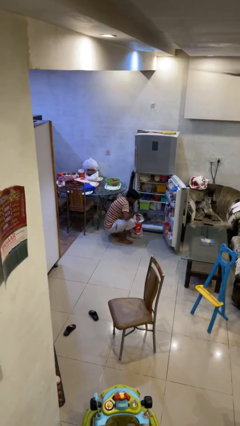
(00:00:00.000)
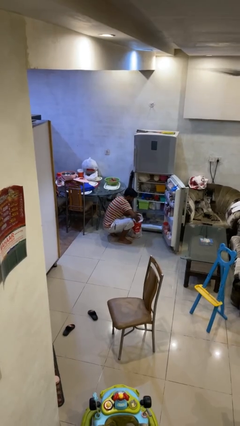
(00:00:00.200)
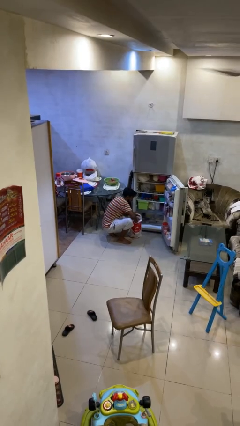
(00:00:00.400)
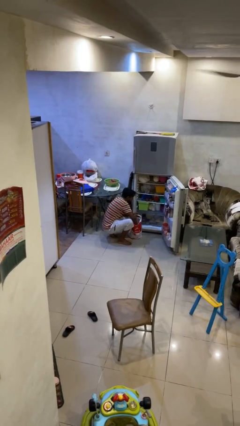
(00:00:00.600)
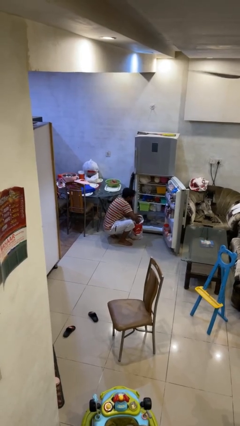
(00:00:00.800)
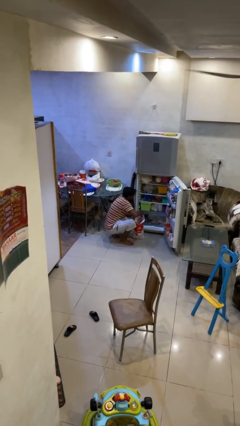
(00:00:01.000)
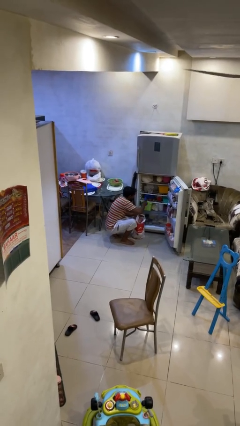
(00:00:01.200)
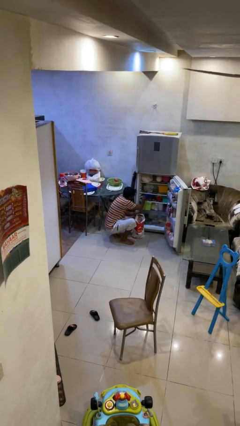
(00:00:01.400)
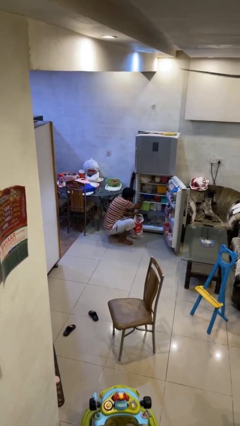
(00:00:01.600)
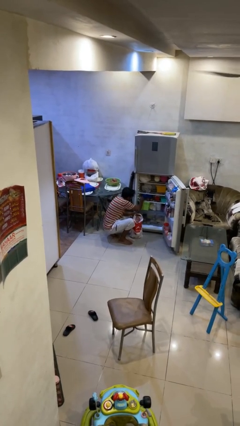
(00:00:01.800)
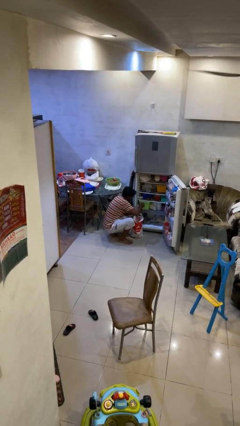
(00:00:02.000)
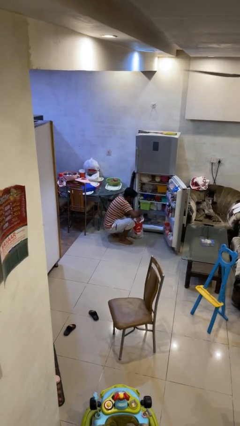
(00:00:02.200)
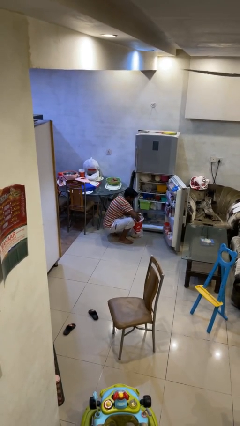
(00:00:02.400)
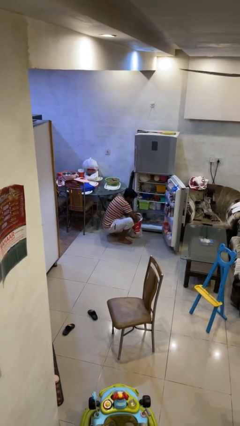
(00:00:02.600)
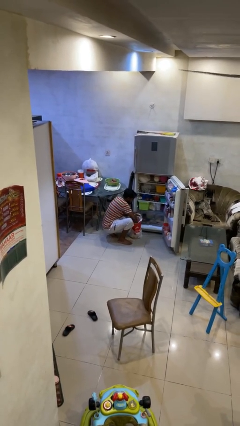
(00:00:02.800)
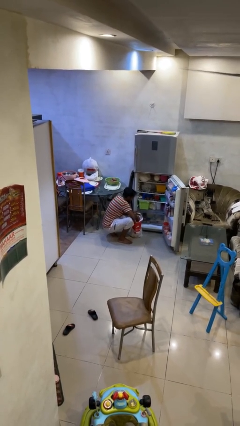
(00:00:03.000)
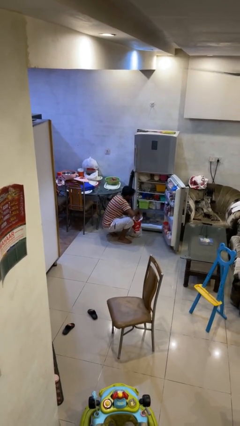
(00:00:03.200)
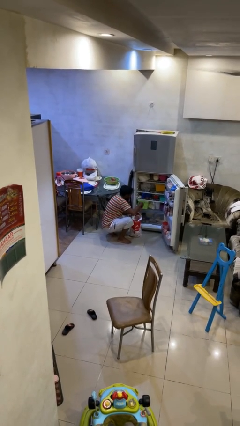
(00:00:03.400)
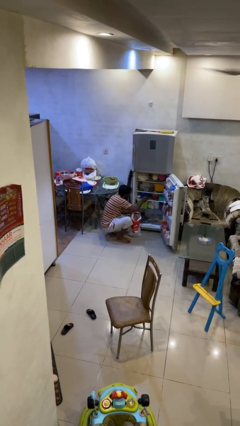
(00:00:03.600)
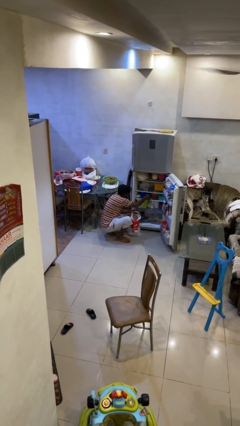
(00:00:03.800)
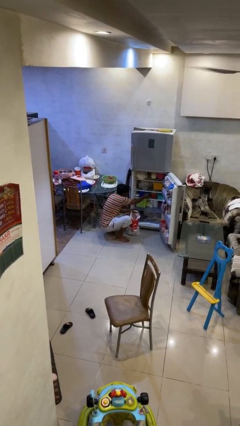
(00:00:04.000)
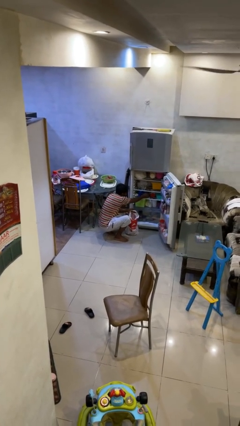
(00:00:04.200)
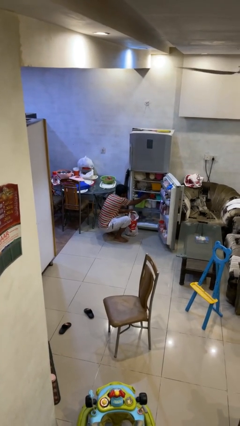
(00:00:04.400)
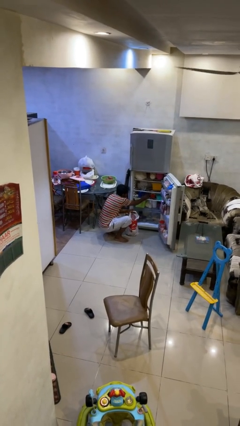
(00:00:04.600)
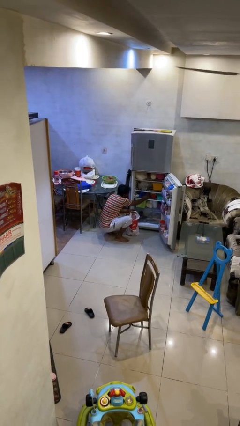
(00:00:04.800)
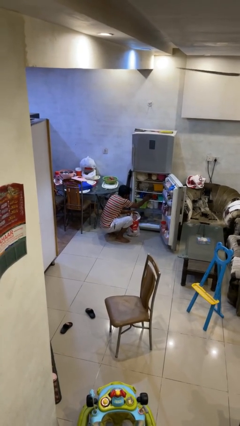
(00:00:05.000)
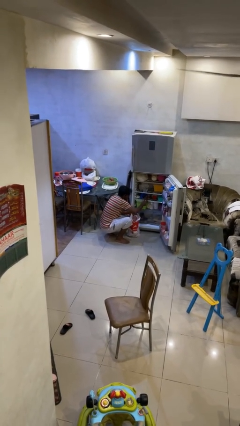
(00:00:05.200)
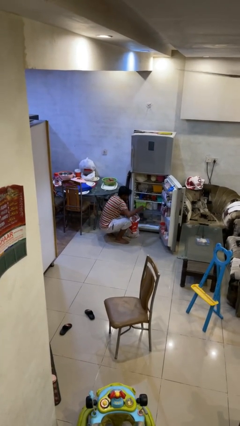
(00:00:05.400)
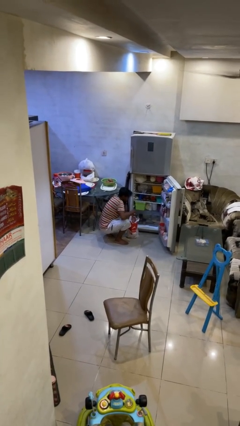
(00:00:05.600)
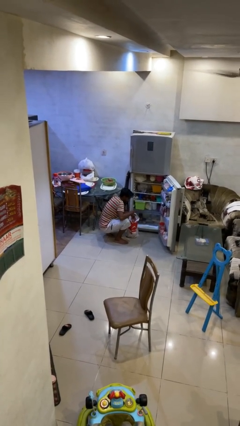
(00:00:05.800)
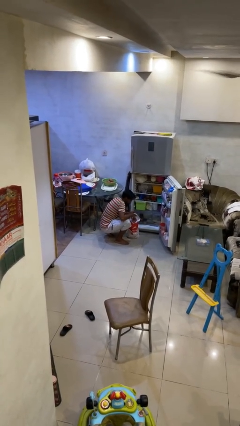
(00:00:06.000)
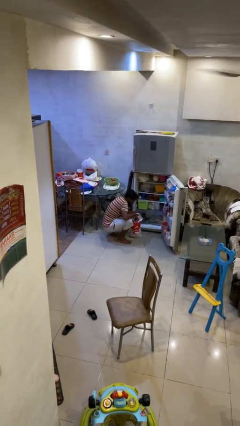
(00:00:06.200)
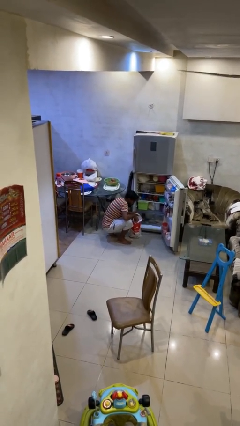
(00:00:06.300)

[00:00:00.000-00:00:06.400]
person loads groceries into refrigerator

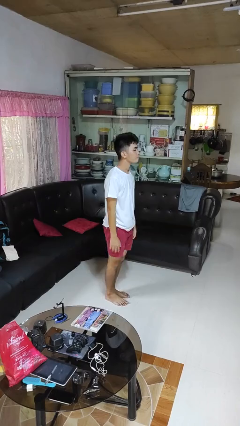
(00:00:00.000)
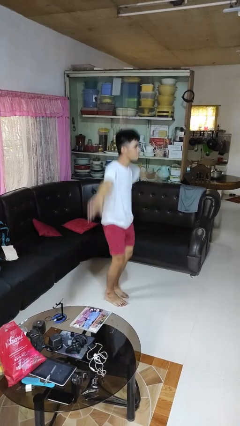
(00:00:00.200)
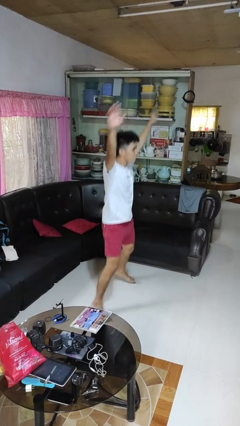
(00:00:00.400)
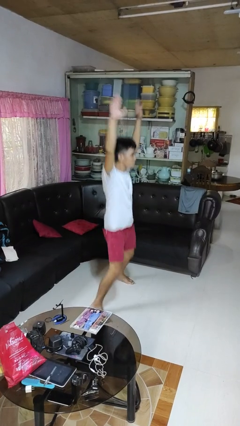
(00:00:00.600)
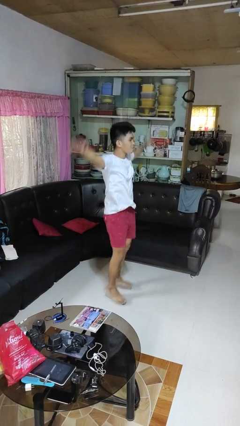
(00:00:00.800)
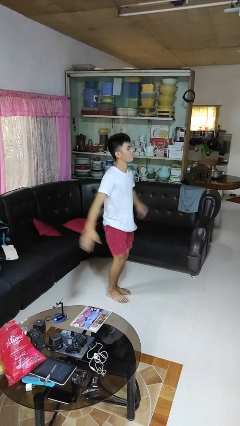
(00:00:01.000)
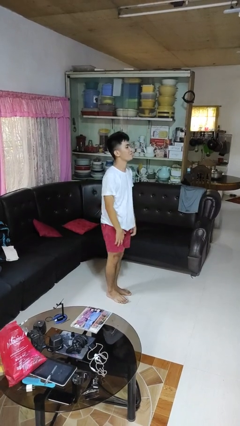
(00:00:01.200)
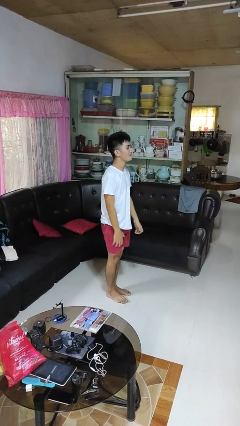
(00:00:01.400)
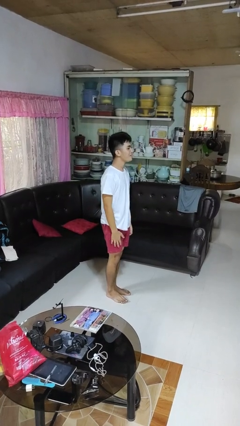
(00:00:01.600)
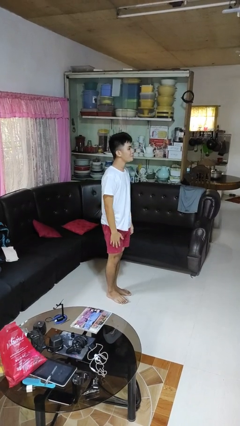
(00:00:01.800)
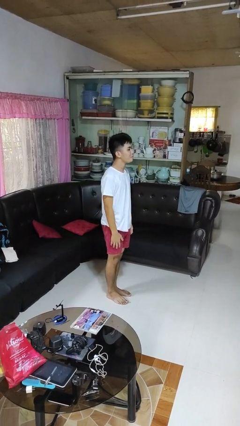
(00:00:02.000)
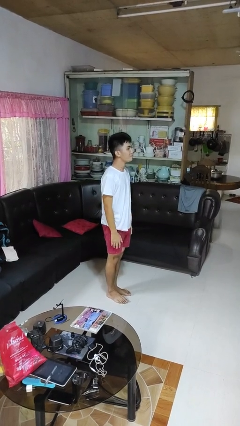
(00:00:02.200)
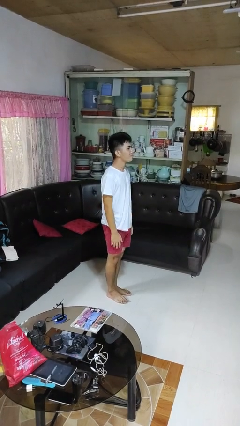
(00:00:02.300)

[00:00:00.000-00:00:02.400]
person exercises with jumping jacks

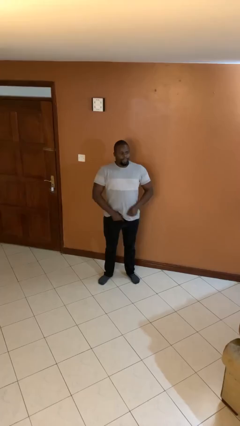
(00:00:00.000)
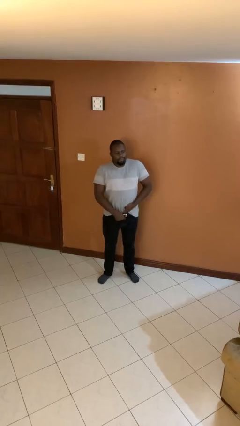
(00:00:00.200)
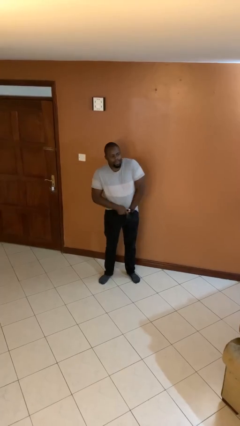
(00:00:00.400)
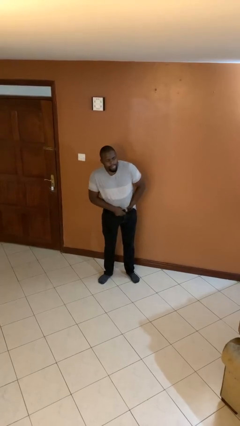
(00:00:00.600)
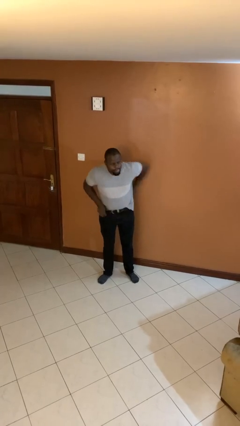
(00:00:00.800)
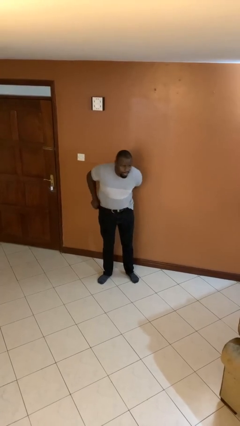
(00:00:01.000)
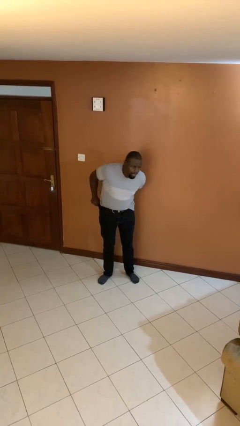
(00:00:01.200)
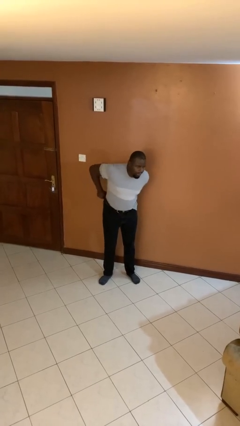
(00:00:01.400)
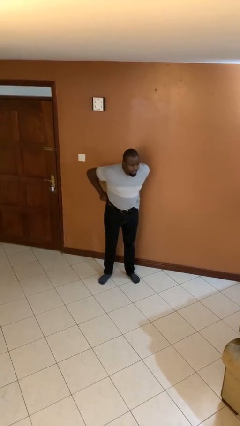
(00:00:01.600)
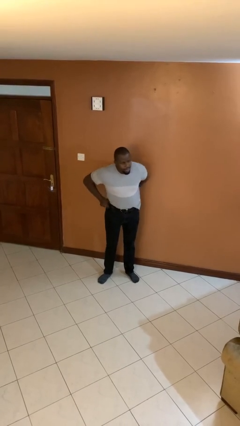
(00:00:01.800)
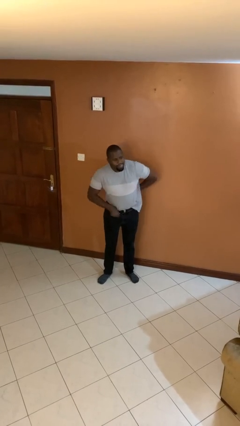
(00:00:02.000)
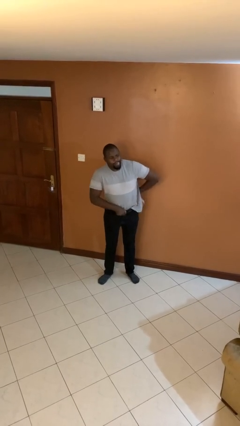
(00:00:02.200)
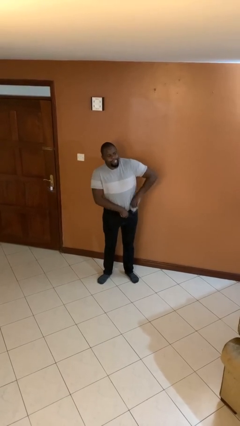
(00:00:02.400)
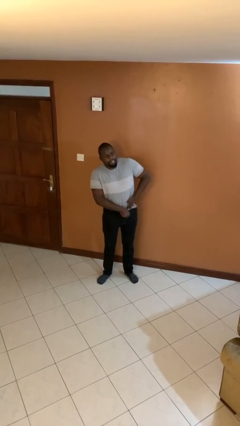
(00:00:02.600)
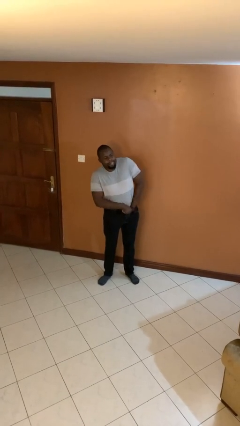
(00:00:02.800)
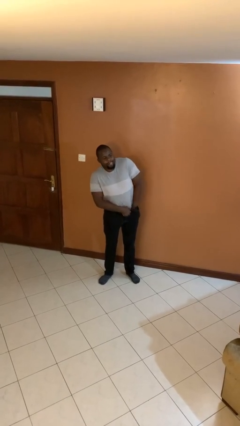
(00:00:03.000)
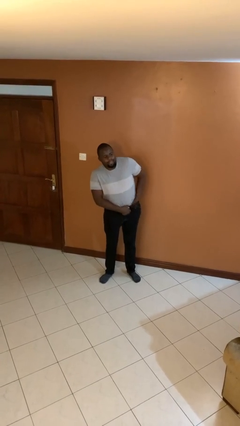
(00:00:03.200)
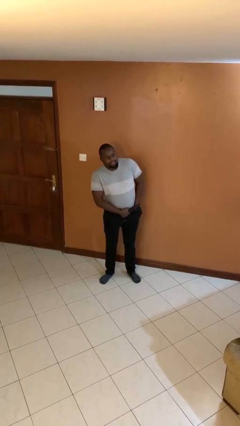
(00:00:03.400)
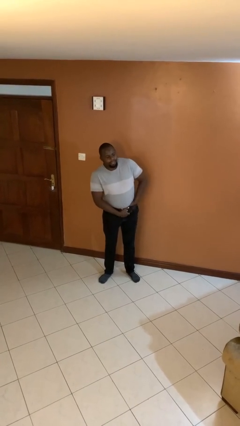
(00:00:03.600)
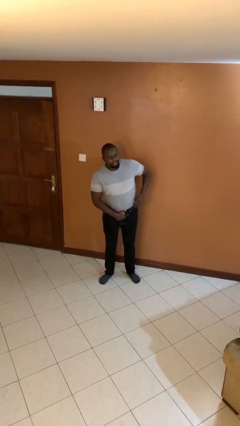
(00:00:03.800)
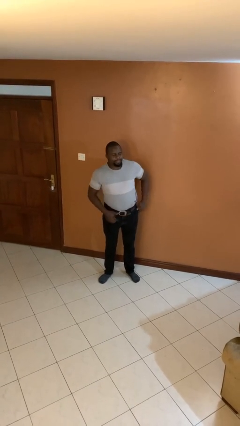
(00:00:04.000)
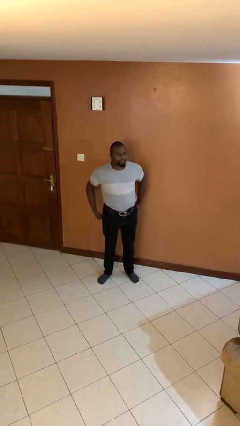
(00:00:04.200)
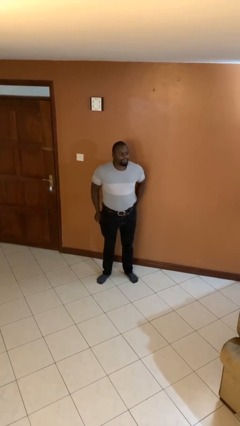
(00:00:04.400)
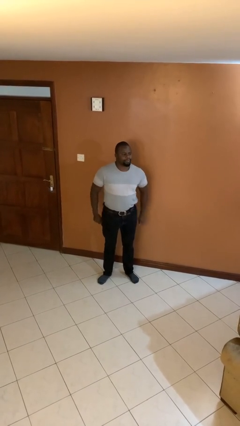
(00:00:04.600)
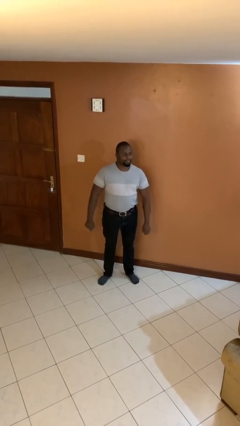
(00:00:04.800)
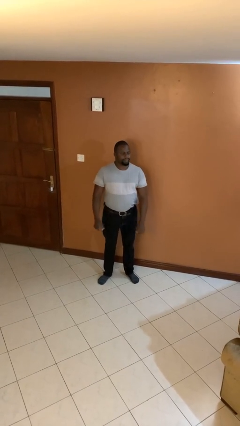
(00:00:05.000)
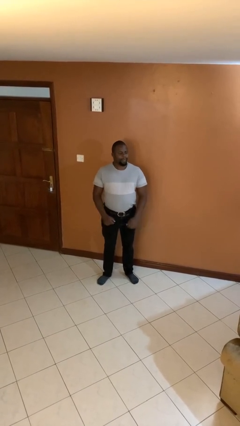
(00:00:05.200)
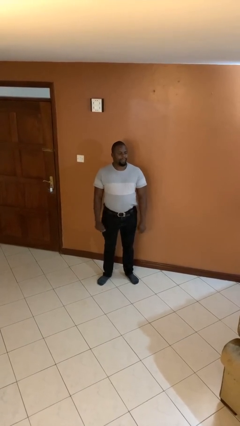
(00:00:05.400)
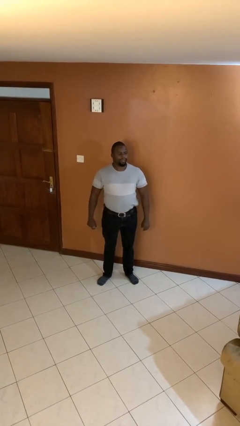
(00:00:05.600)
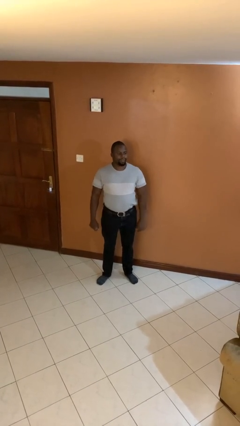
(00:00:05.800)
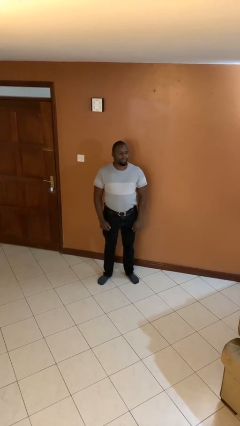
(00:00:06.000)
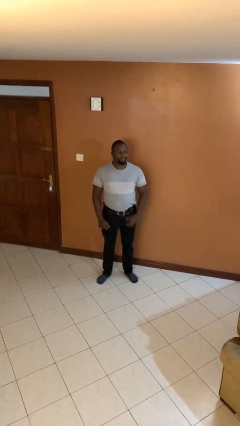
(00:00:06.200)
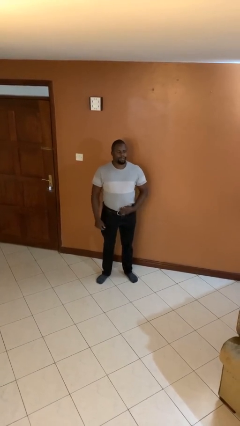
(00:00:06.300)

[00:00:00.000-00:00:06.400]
person tucks in shirt

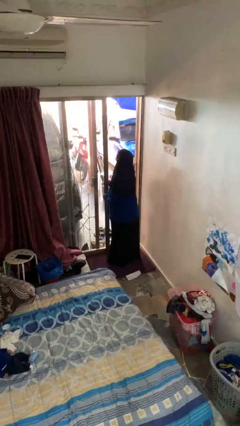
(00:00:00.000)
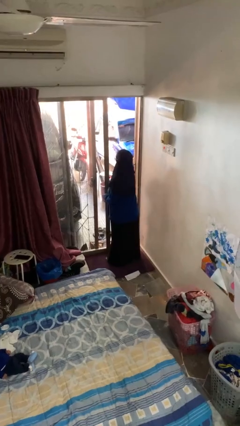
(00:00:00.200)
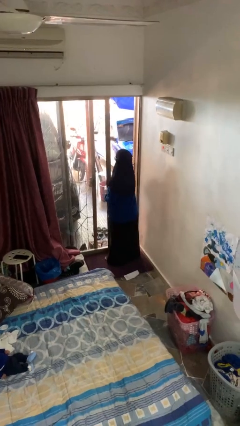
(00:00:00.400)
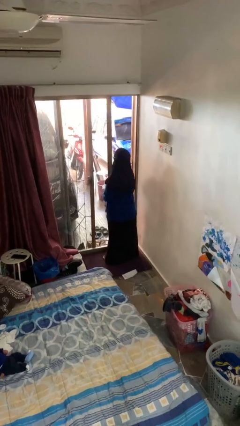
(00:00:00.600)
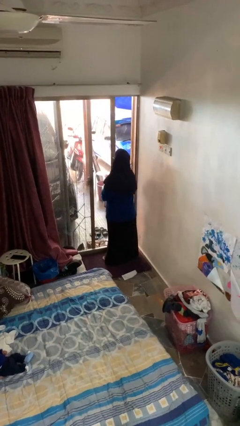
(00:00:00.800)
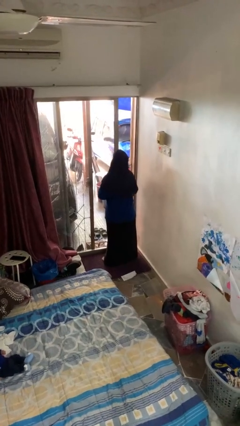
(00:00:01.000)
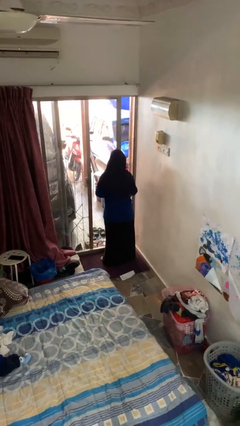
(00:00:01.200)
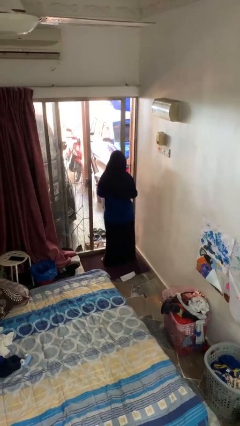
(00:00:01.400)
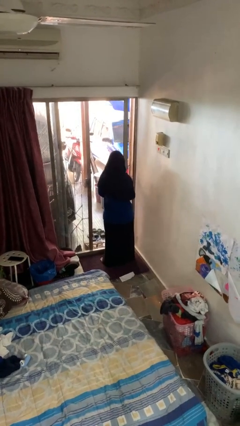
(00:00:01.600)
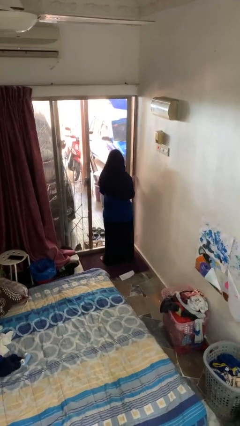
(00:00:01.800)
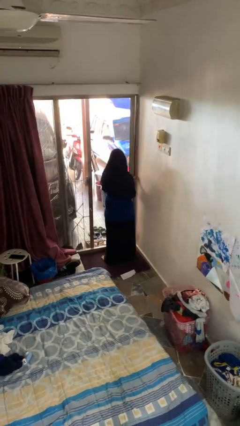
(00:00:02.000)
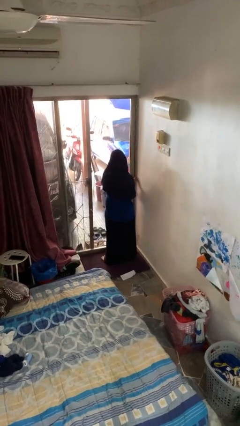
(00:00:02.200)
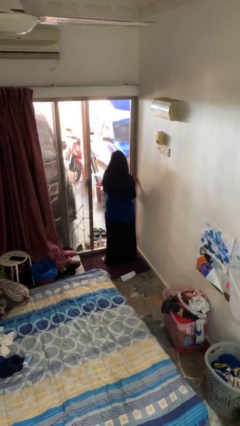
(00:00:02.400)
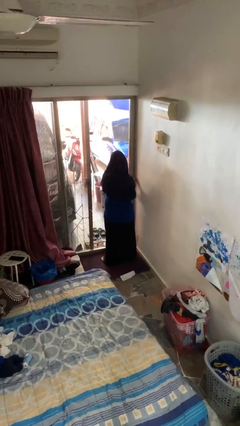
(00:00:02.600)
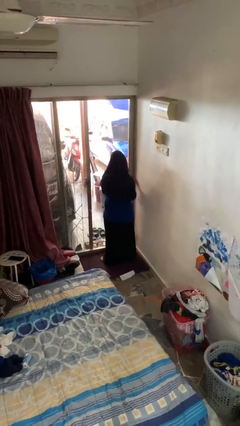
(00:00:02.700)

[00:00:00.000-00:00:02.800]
person closes sliding door
